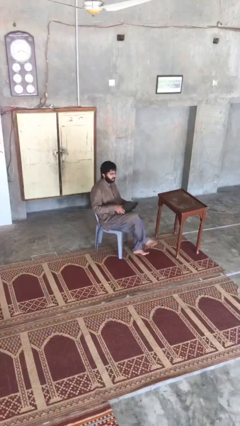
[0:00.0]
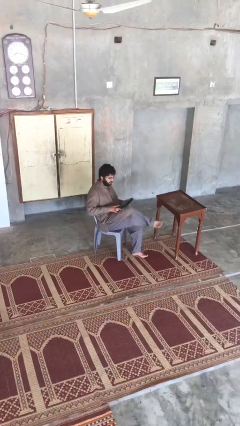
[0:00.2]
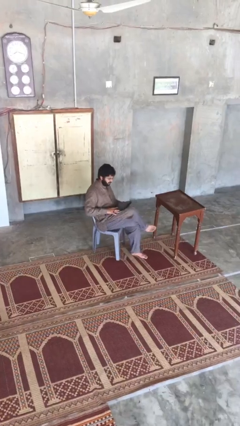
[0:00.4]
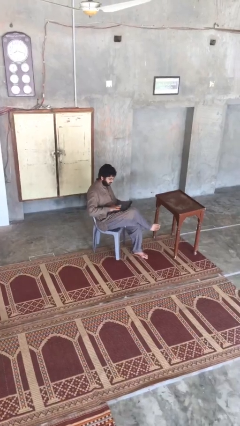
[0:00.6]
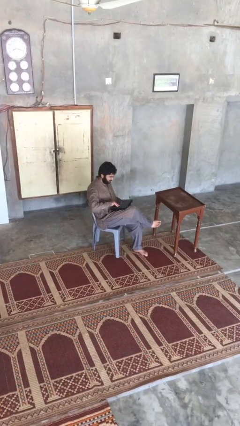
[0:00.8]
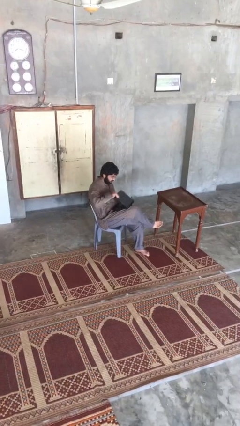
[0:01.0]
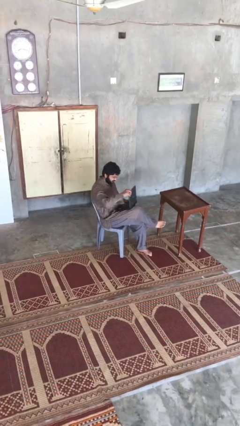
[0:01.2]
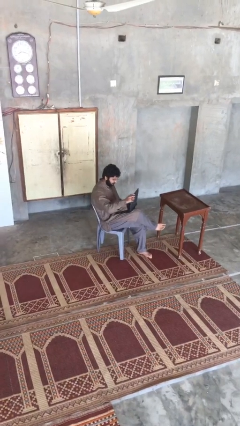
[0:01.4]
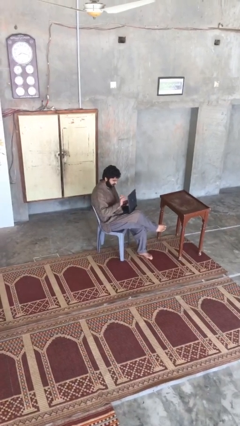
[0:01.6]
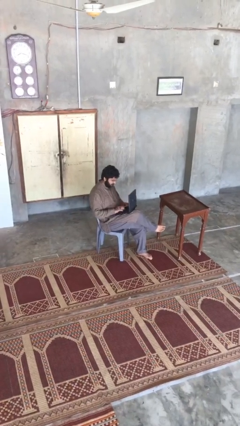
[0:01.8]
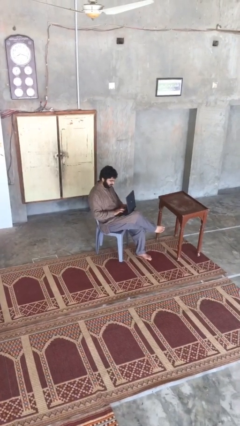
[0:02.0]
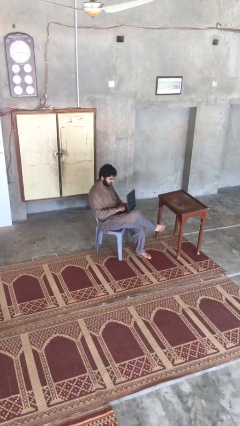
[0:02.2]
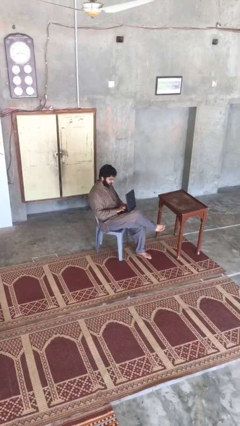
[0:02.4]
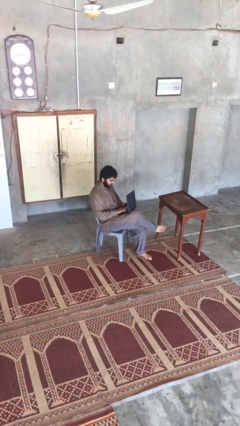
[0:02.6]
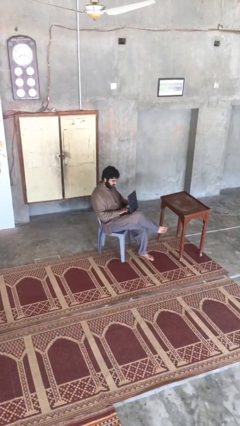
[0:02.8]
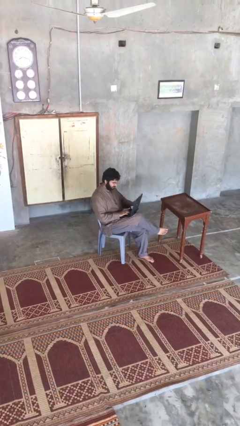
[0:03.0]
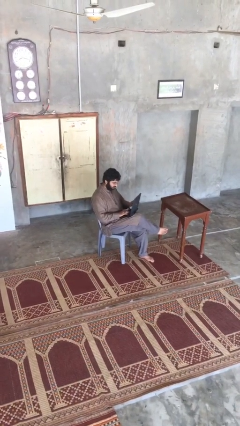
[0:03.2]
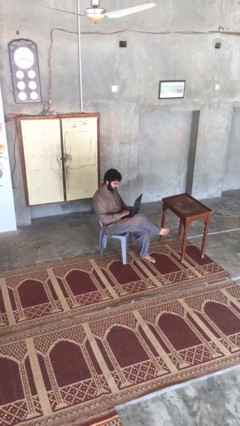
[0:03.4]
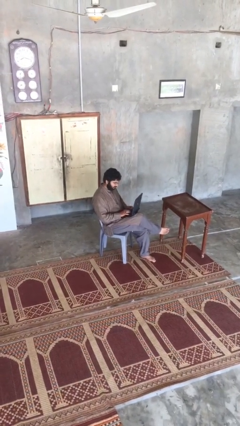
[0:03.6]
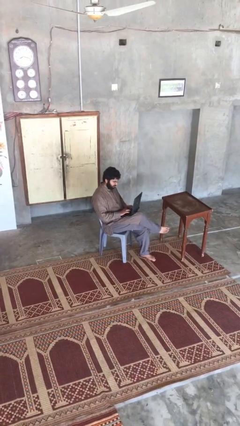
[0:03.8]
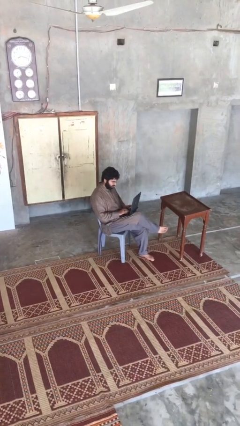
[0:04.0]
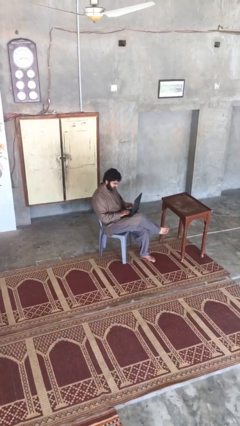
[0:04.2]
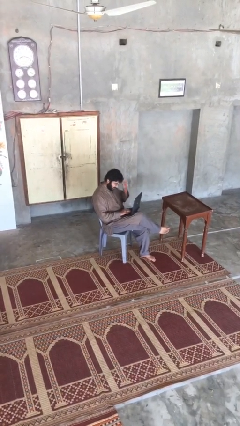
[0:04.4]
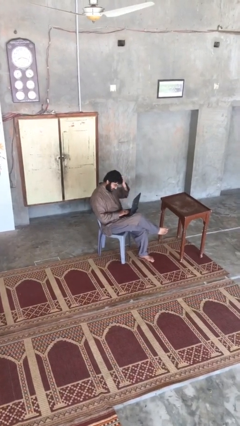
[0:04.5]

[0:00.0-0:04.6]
person interacts with laptop

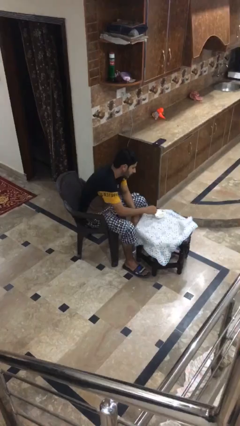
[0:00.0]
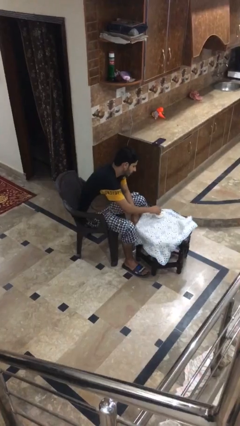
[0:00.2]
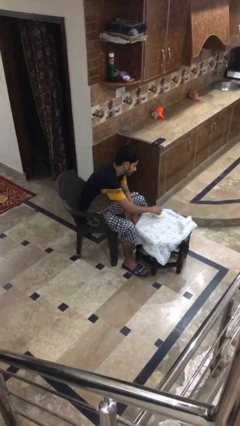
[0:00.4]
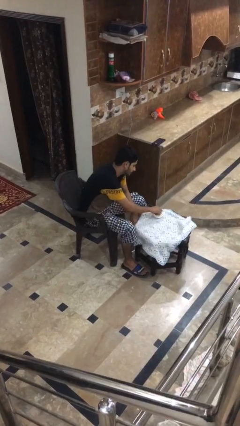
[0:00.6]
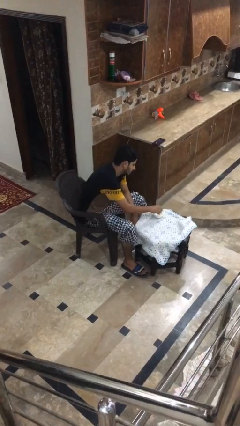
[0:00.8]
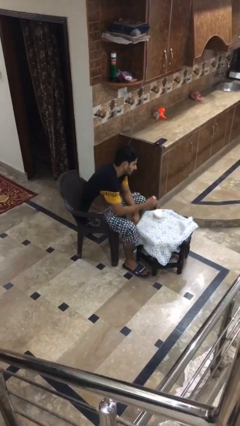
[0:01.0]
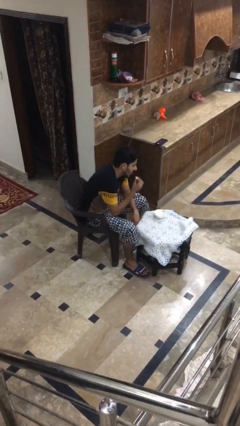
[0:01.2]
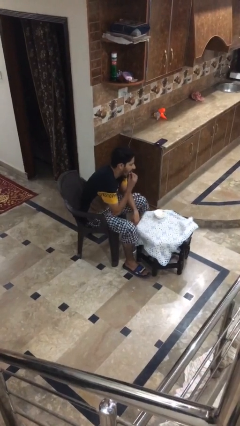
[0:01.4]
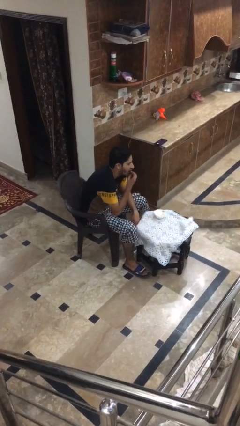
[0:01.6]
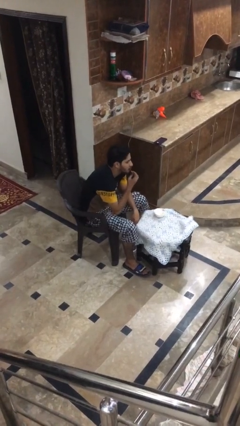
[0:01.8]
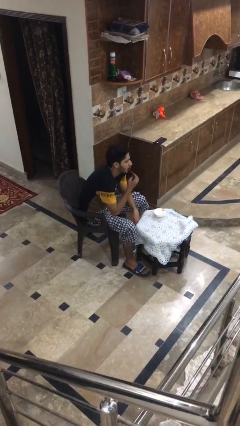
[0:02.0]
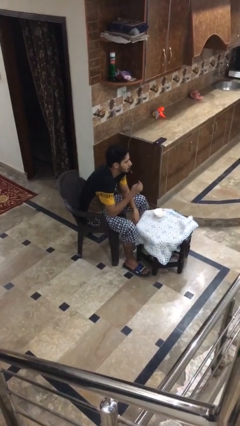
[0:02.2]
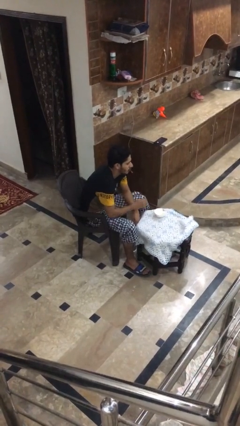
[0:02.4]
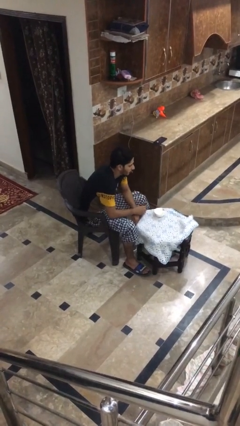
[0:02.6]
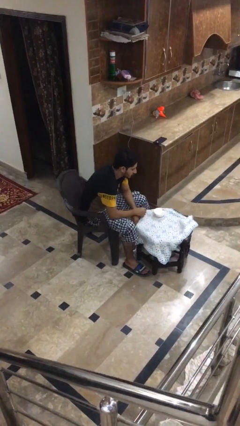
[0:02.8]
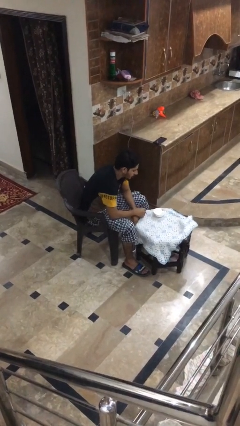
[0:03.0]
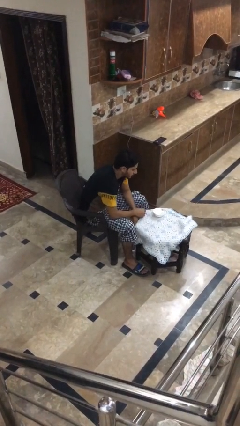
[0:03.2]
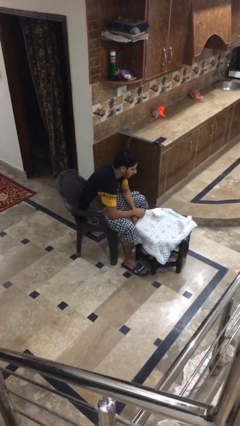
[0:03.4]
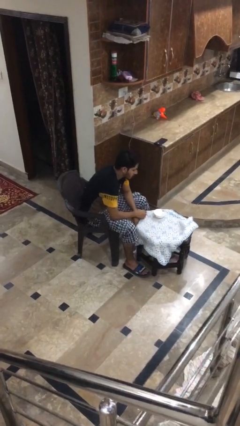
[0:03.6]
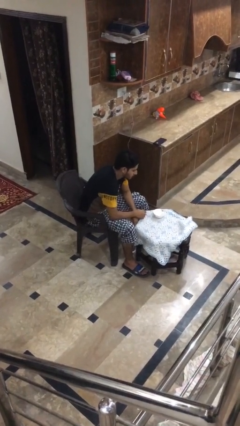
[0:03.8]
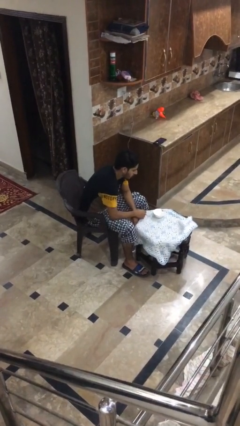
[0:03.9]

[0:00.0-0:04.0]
person eats with hands

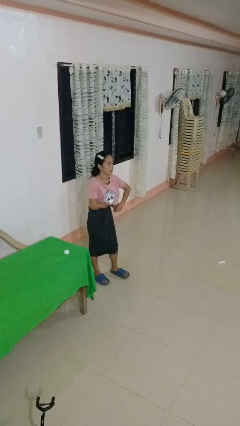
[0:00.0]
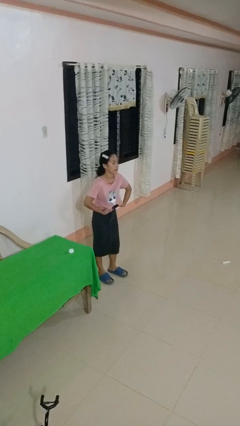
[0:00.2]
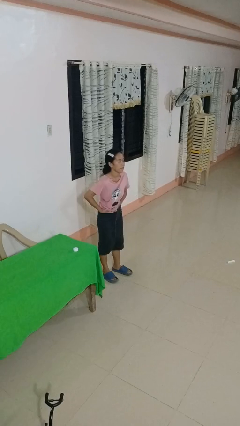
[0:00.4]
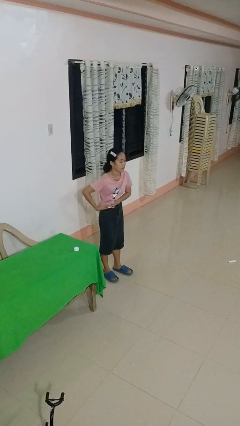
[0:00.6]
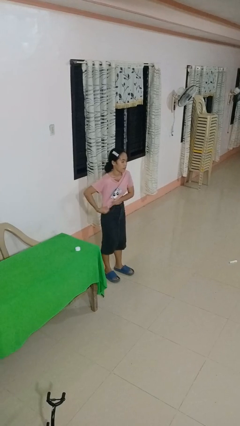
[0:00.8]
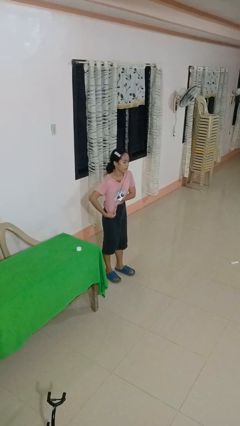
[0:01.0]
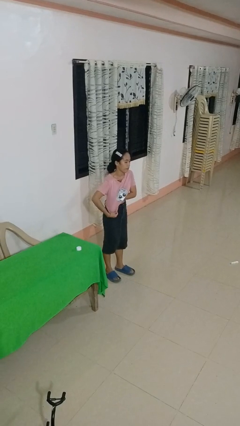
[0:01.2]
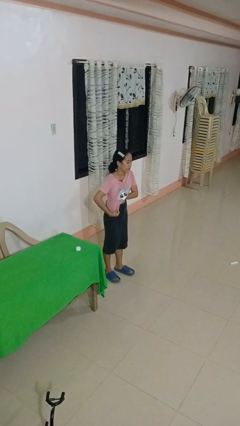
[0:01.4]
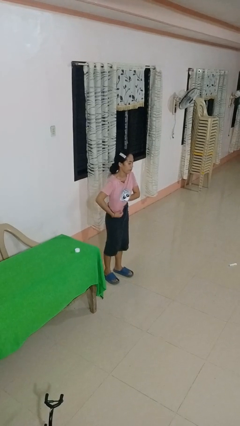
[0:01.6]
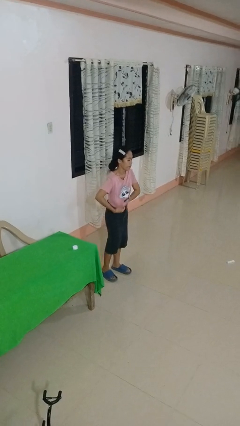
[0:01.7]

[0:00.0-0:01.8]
person applies deodorant

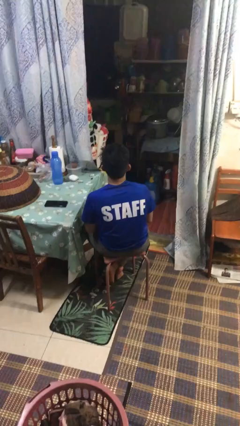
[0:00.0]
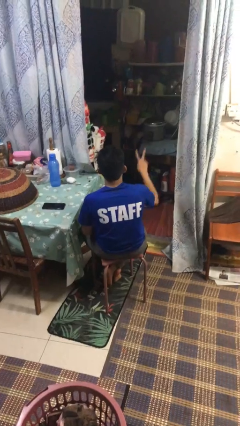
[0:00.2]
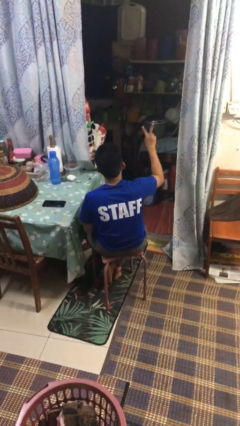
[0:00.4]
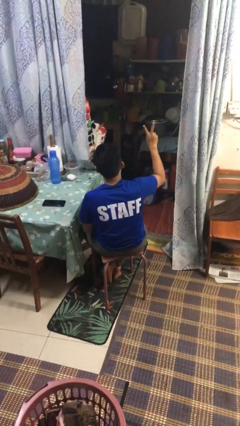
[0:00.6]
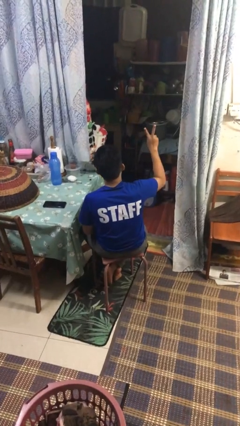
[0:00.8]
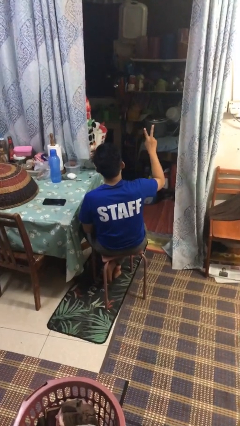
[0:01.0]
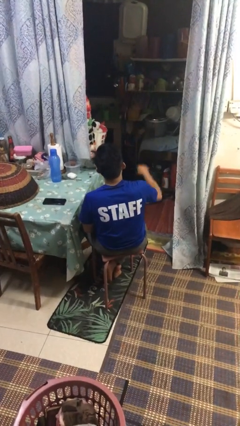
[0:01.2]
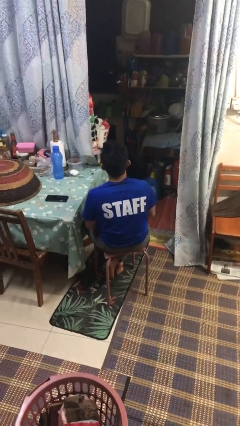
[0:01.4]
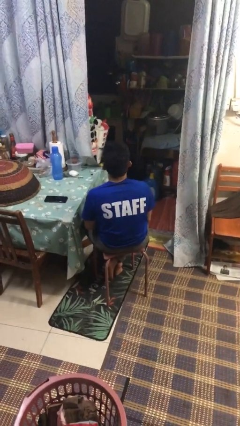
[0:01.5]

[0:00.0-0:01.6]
person gestures peace

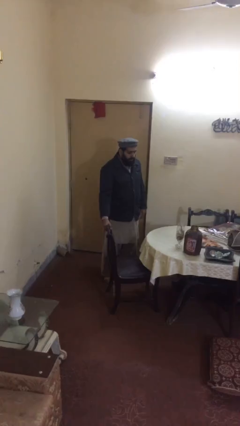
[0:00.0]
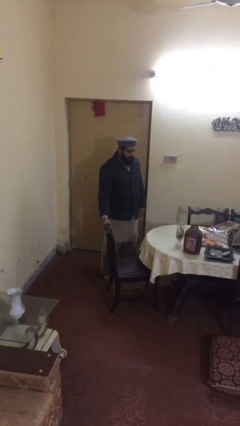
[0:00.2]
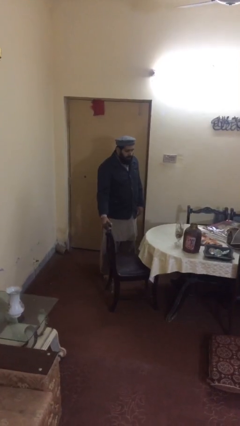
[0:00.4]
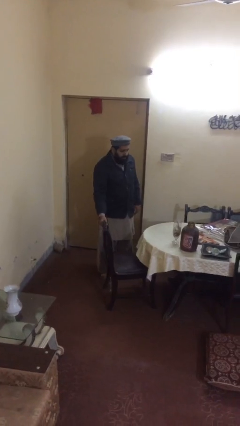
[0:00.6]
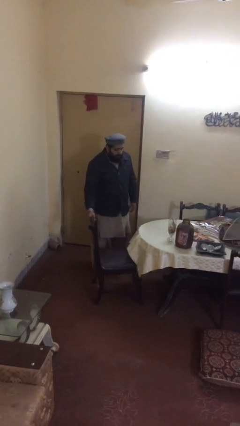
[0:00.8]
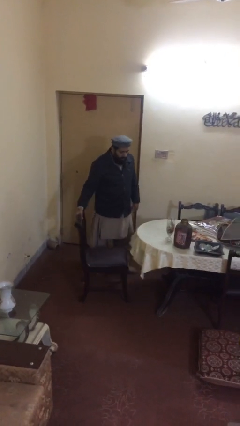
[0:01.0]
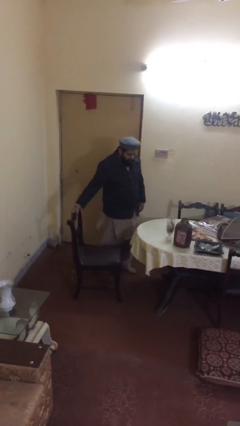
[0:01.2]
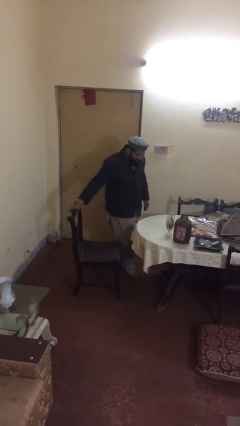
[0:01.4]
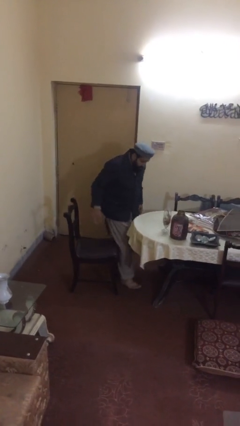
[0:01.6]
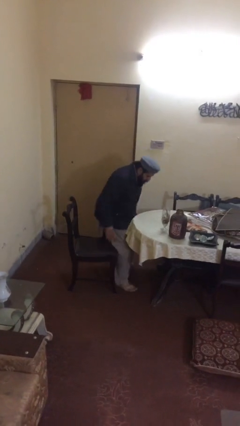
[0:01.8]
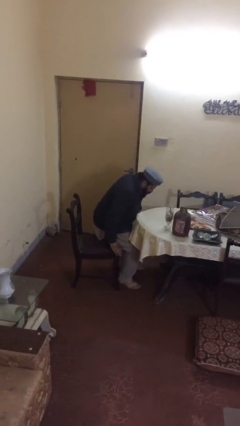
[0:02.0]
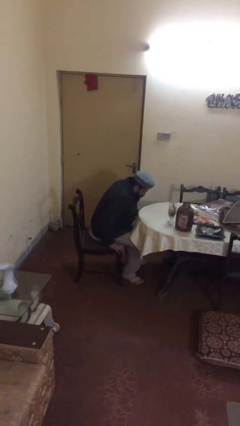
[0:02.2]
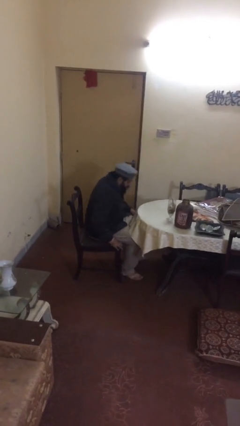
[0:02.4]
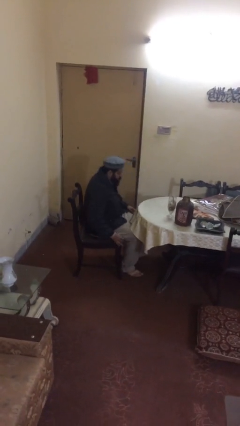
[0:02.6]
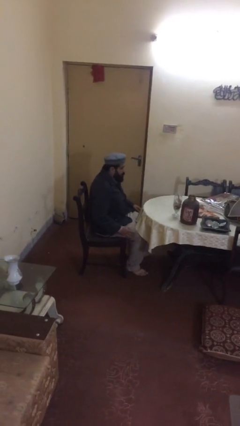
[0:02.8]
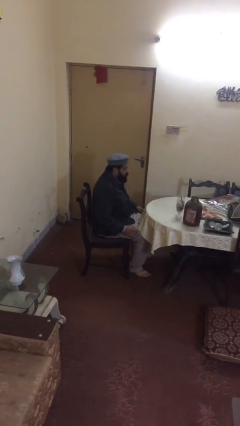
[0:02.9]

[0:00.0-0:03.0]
person sits down

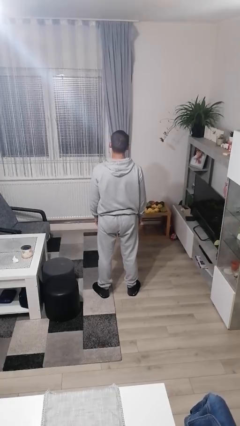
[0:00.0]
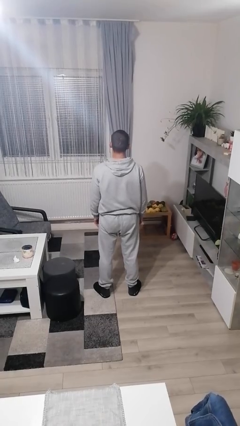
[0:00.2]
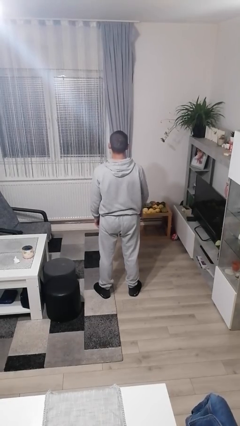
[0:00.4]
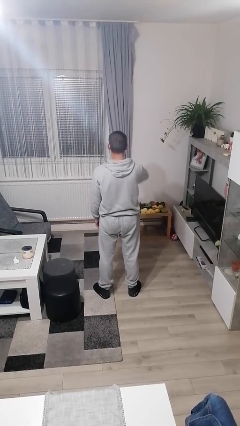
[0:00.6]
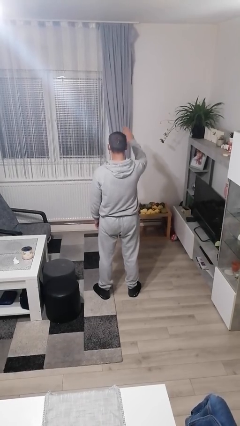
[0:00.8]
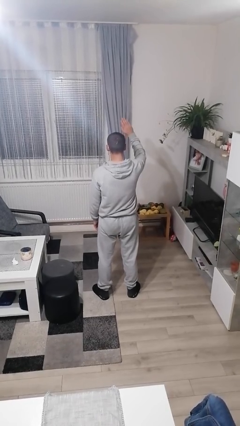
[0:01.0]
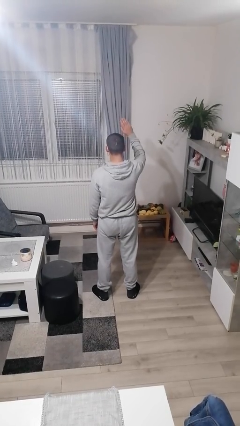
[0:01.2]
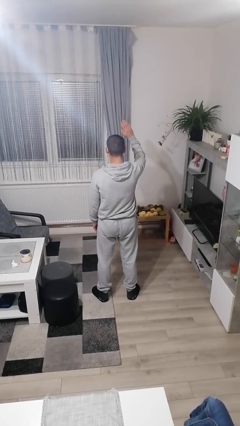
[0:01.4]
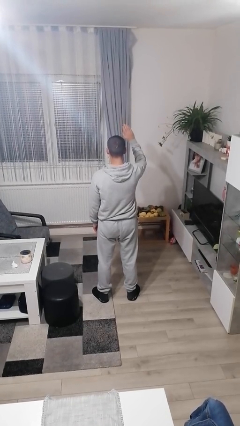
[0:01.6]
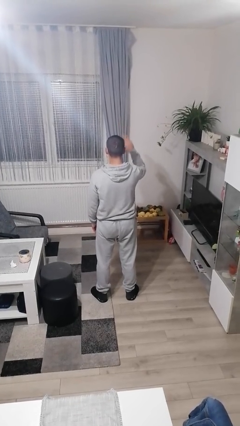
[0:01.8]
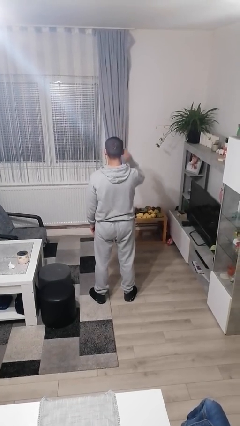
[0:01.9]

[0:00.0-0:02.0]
person salutes
